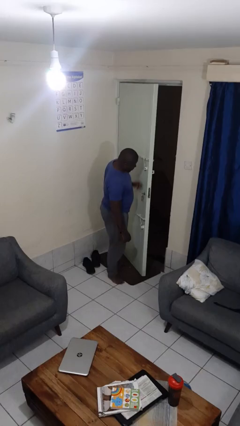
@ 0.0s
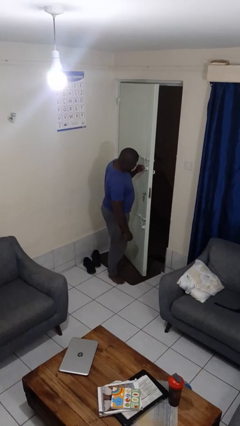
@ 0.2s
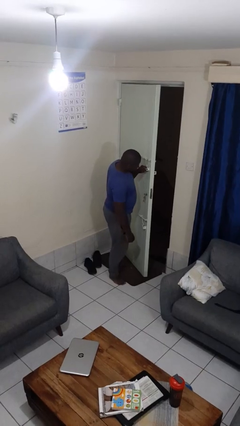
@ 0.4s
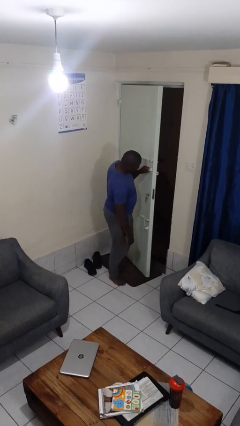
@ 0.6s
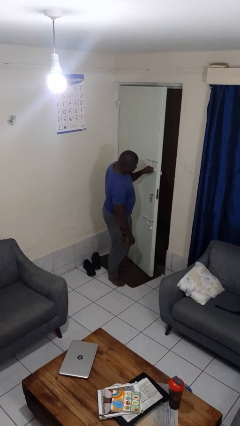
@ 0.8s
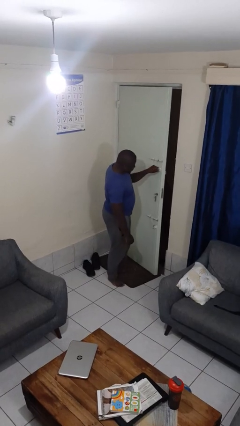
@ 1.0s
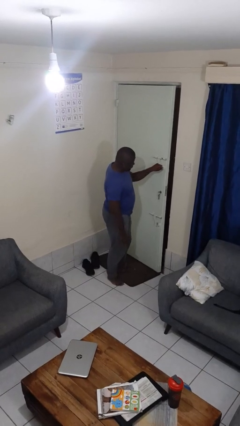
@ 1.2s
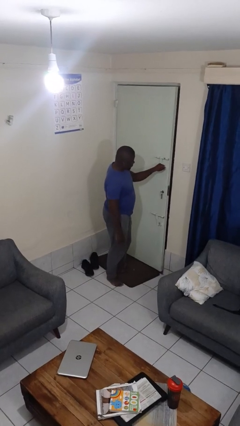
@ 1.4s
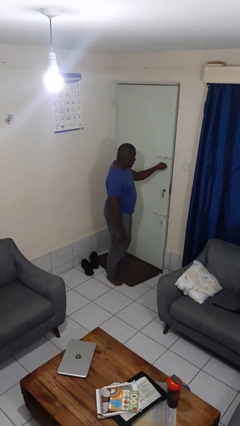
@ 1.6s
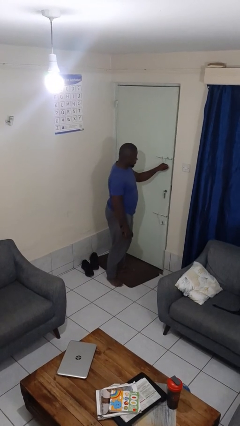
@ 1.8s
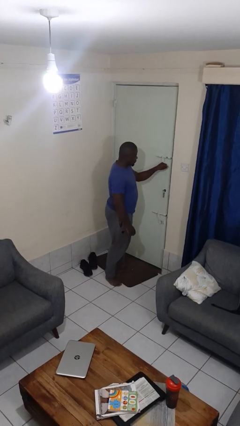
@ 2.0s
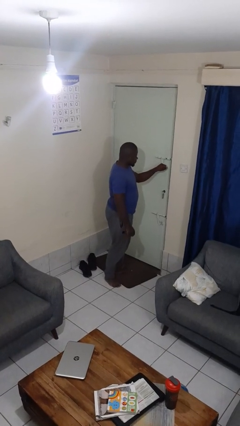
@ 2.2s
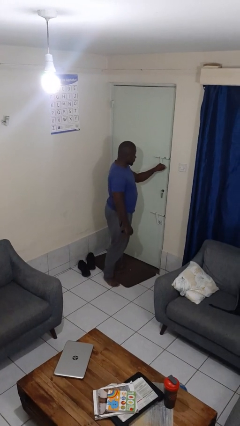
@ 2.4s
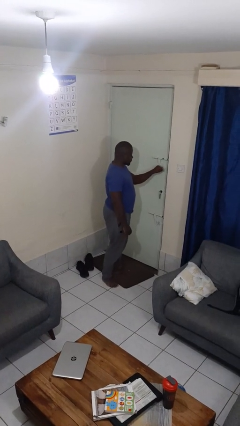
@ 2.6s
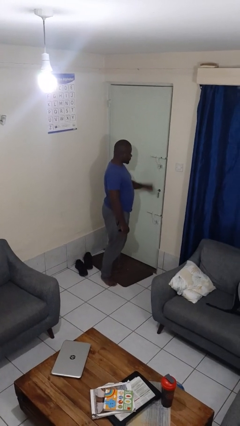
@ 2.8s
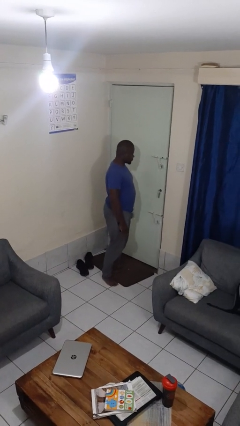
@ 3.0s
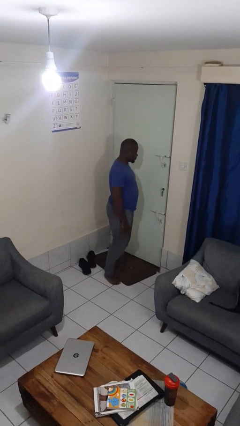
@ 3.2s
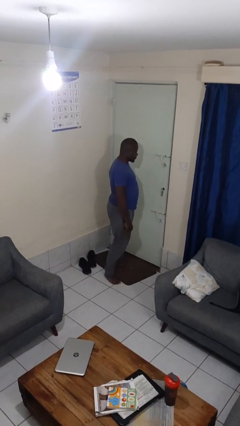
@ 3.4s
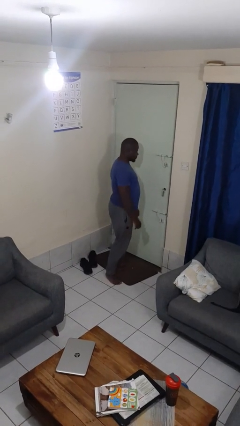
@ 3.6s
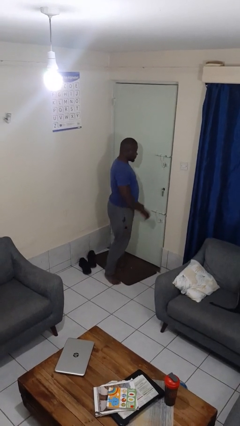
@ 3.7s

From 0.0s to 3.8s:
person closes facility door

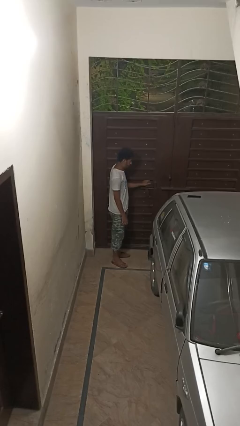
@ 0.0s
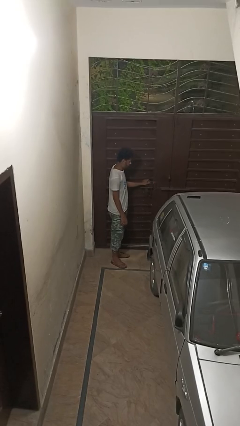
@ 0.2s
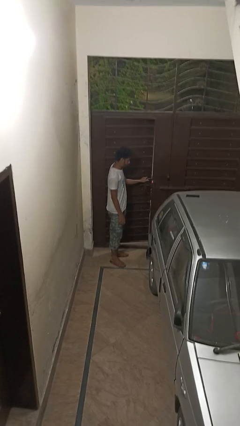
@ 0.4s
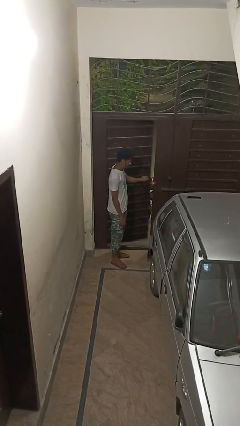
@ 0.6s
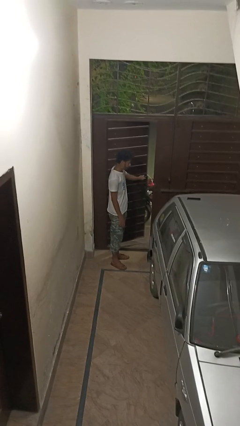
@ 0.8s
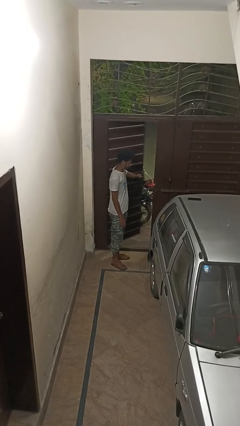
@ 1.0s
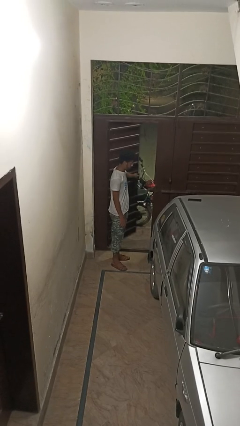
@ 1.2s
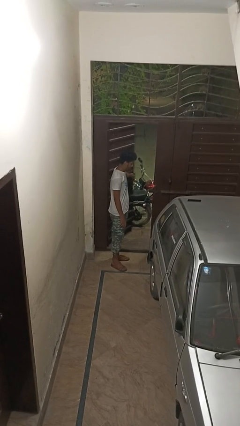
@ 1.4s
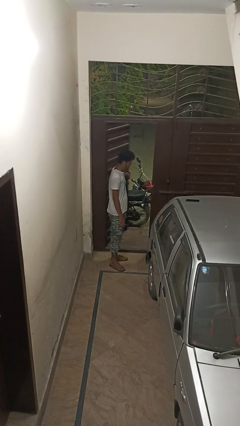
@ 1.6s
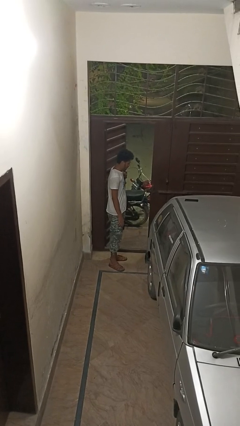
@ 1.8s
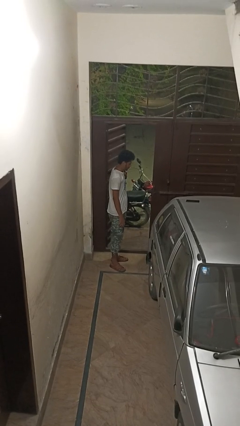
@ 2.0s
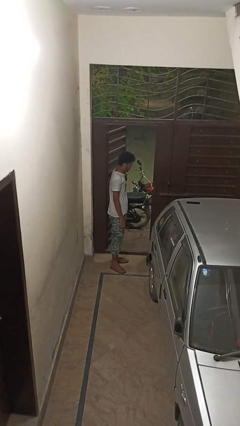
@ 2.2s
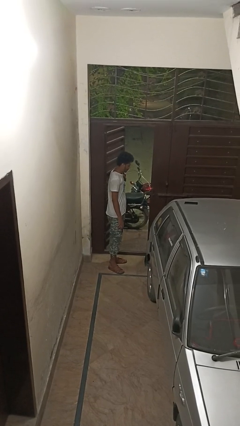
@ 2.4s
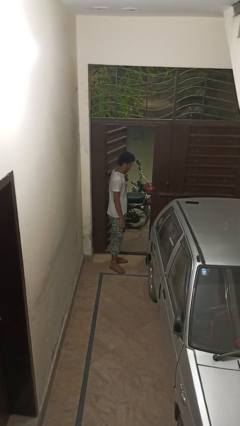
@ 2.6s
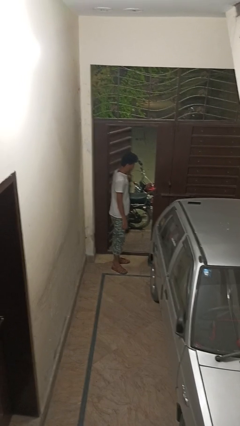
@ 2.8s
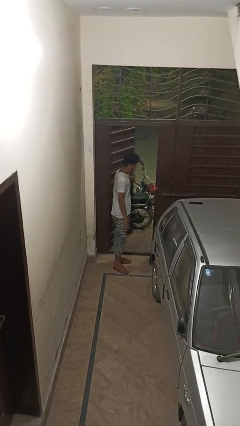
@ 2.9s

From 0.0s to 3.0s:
person opens gate

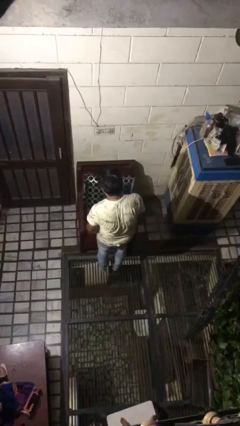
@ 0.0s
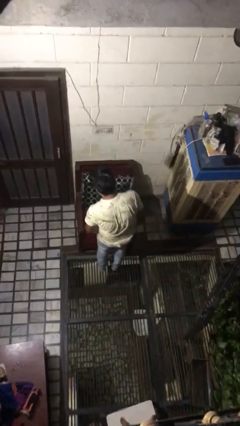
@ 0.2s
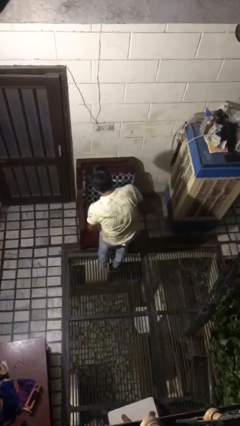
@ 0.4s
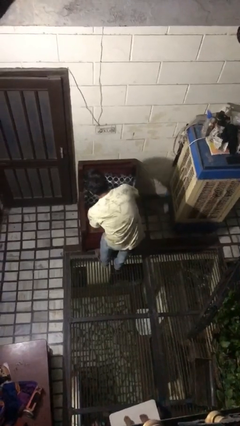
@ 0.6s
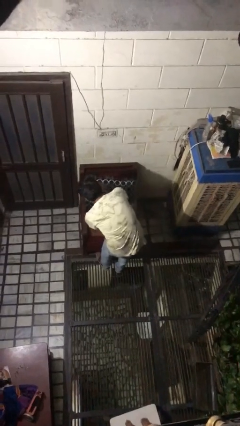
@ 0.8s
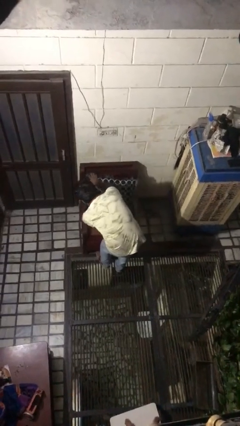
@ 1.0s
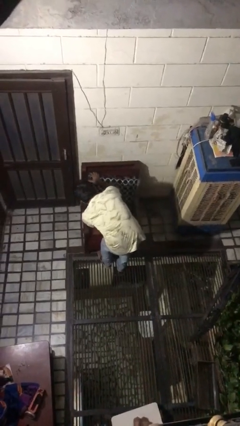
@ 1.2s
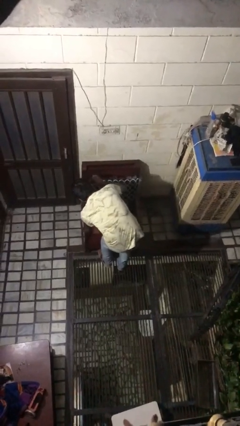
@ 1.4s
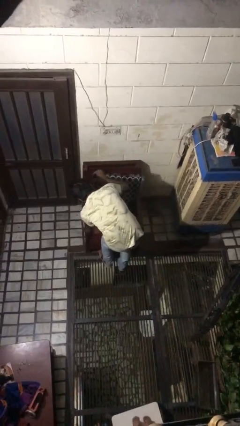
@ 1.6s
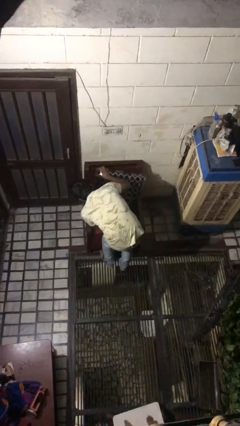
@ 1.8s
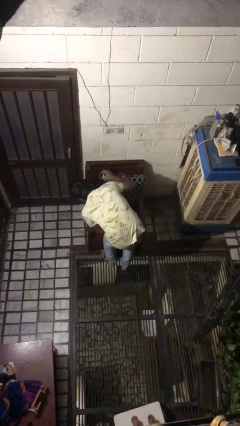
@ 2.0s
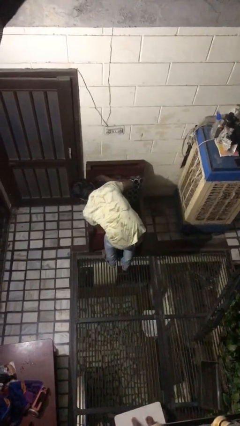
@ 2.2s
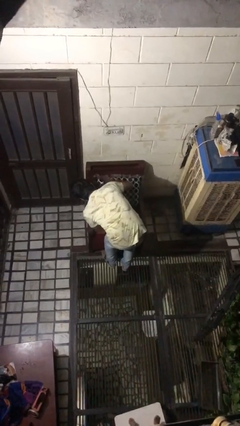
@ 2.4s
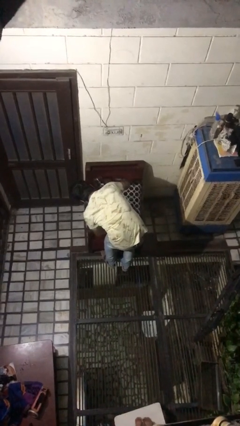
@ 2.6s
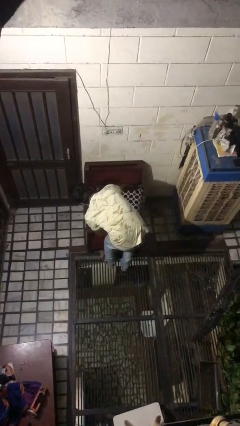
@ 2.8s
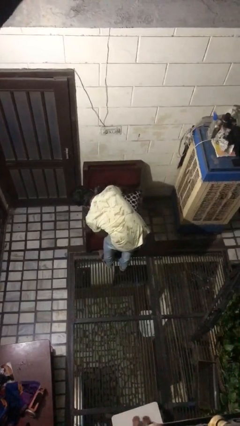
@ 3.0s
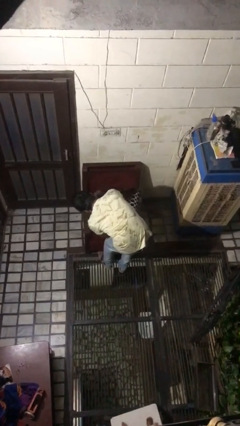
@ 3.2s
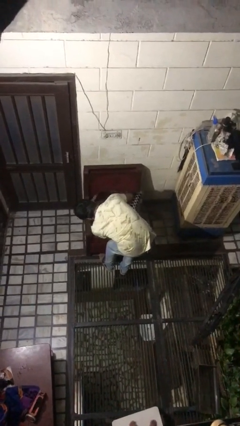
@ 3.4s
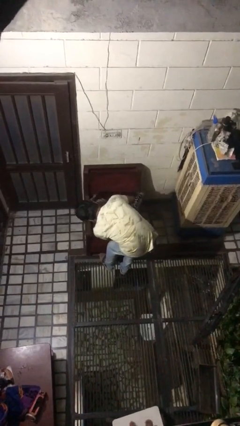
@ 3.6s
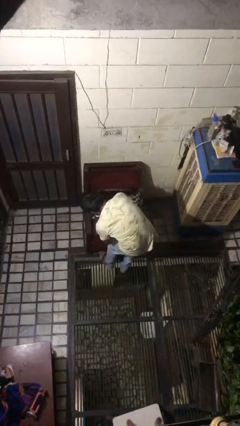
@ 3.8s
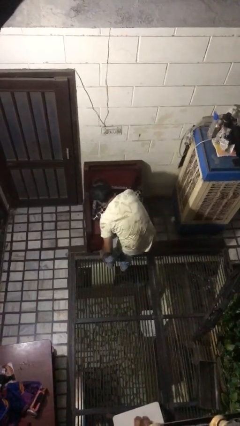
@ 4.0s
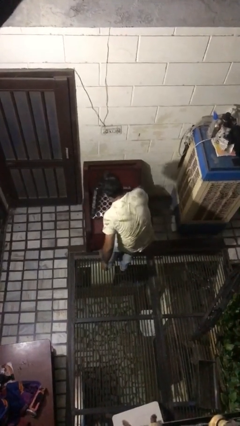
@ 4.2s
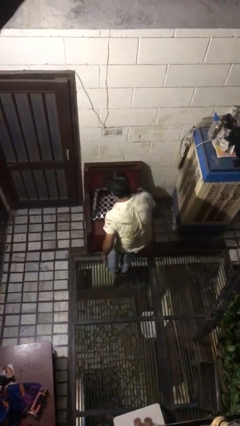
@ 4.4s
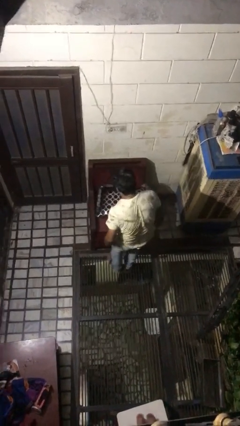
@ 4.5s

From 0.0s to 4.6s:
person searches in couch

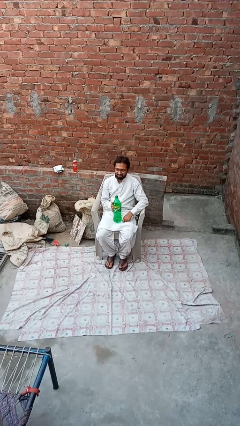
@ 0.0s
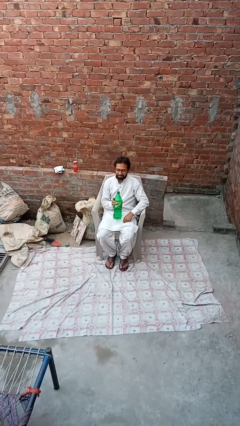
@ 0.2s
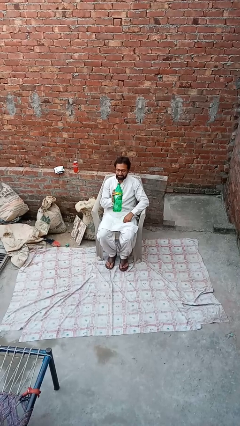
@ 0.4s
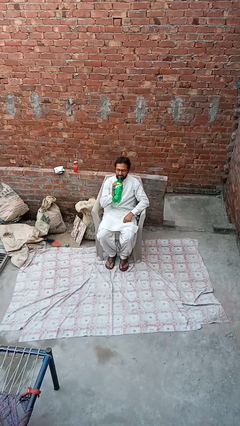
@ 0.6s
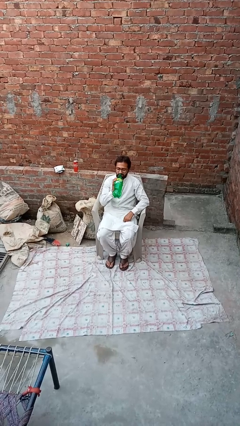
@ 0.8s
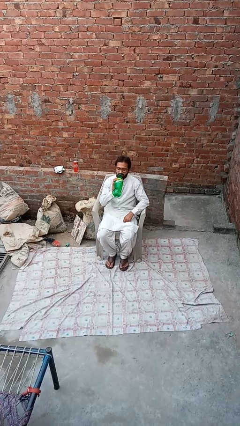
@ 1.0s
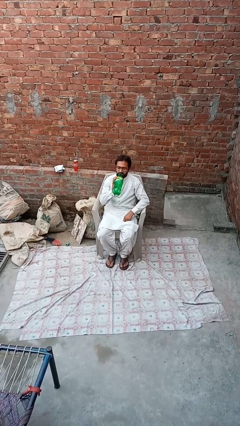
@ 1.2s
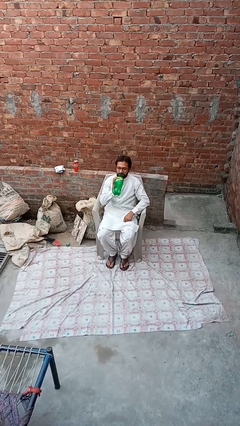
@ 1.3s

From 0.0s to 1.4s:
person drinks from bottle

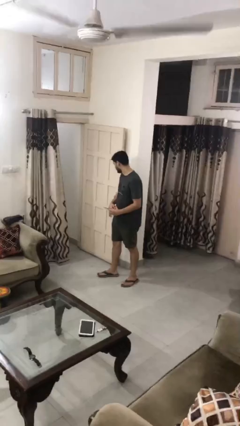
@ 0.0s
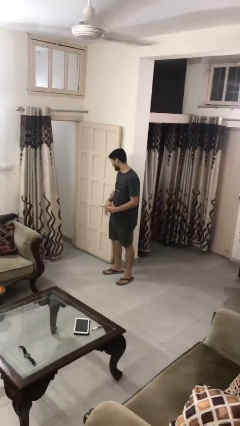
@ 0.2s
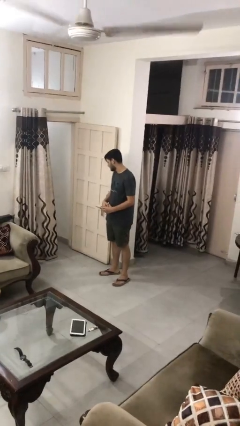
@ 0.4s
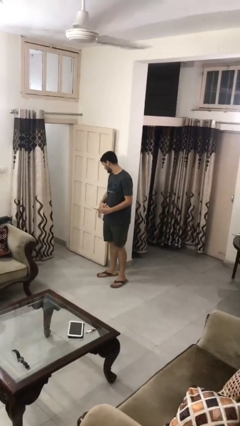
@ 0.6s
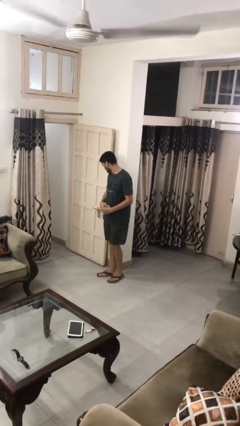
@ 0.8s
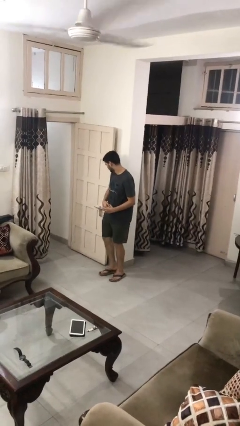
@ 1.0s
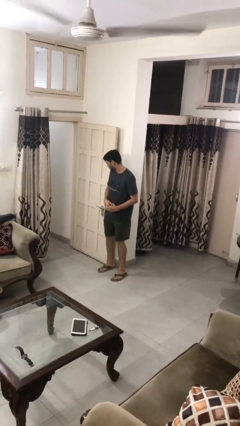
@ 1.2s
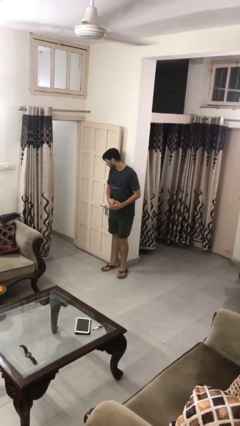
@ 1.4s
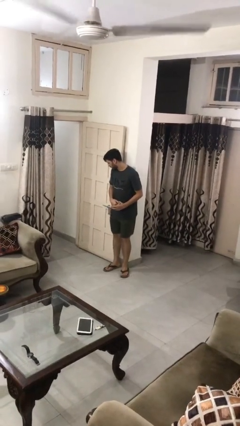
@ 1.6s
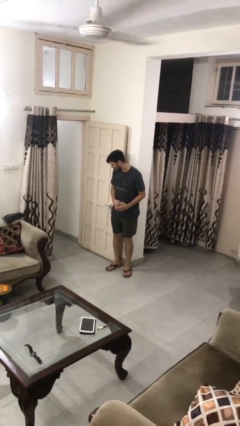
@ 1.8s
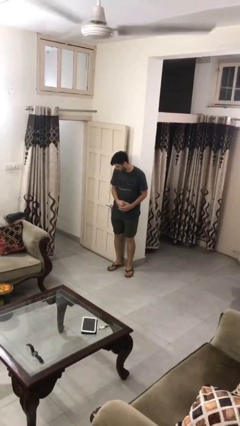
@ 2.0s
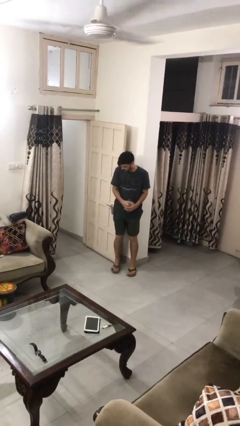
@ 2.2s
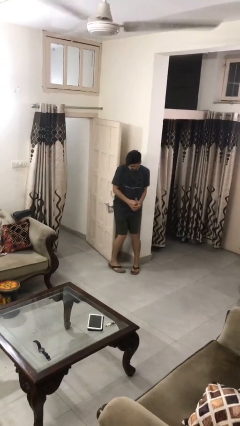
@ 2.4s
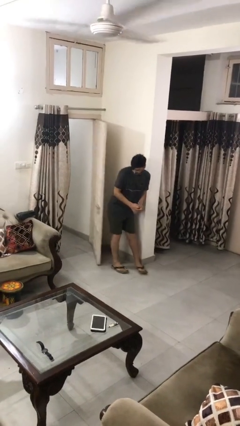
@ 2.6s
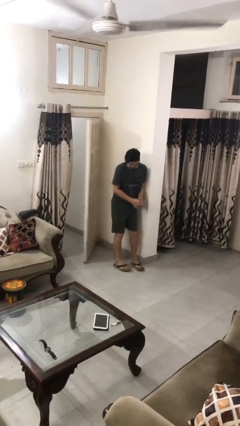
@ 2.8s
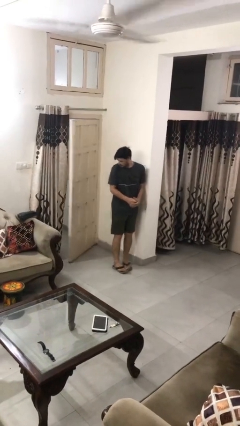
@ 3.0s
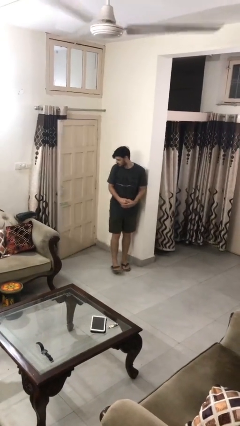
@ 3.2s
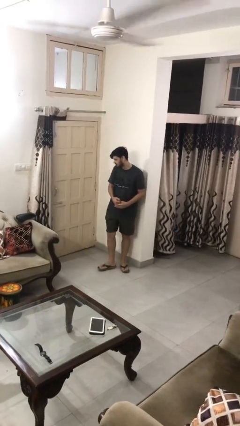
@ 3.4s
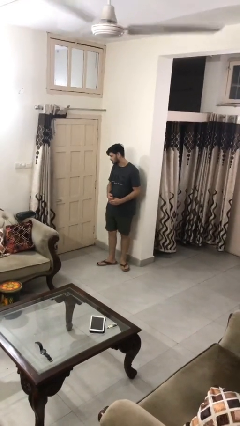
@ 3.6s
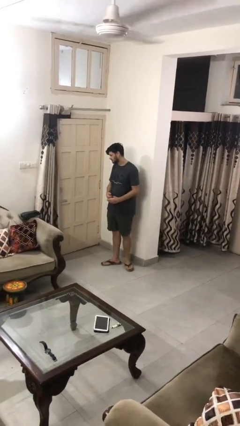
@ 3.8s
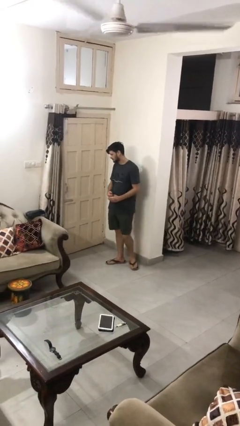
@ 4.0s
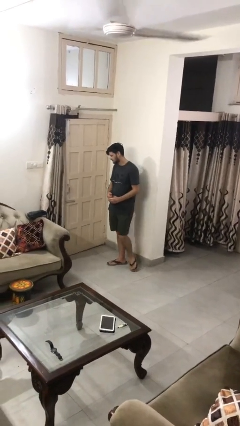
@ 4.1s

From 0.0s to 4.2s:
person closes door with hip

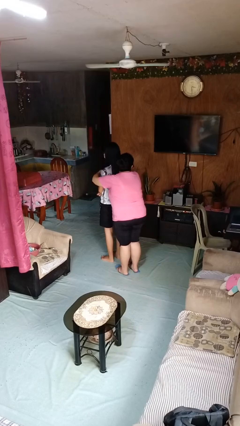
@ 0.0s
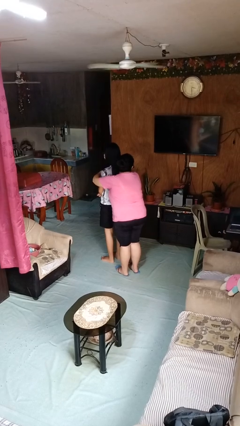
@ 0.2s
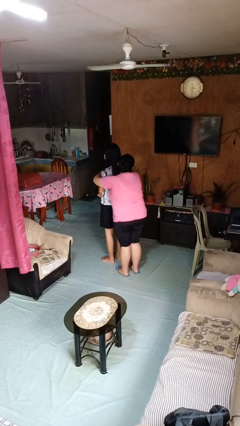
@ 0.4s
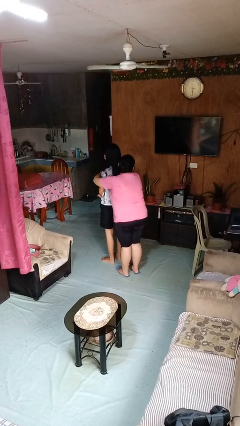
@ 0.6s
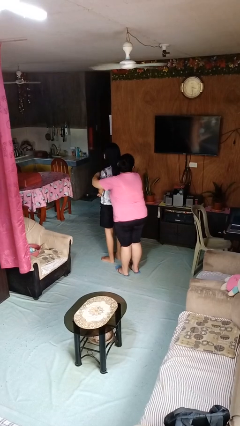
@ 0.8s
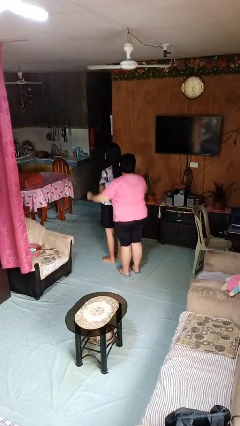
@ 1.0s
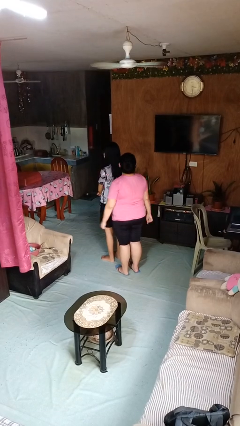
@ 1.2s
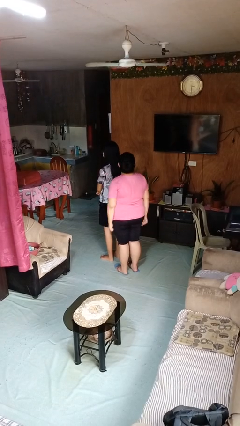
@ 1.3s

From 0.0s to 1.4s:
person hugs person from behind
